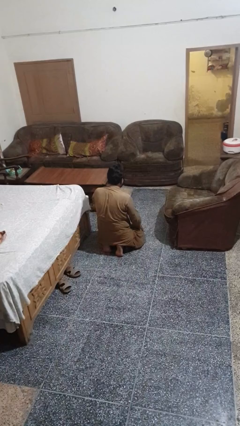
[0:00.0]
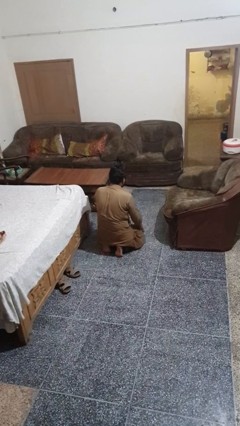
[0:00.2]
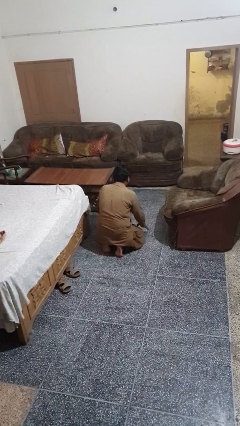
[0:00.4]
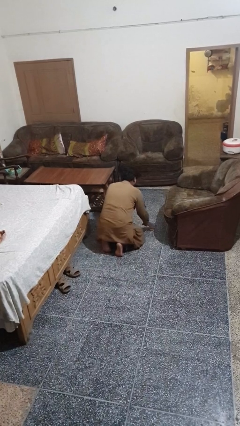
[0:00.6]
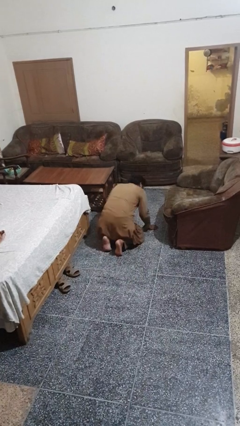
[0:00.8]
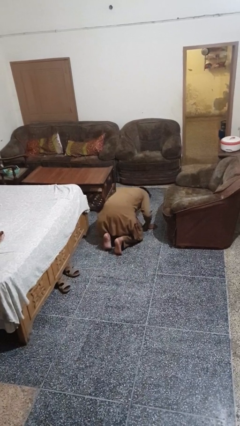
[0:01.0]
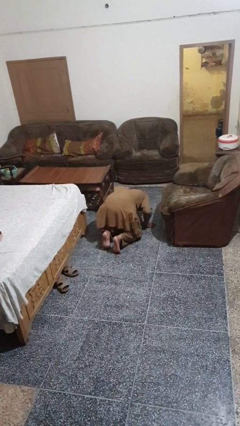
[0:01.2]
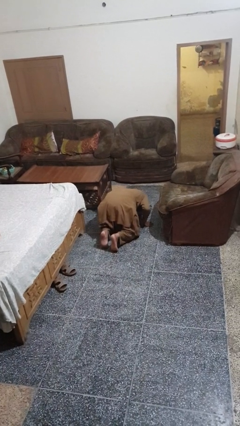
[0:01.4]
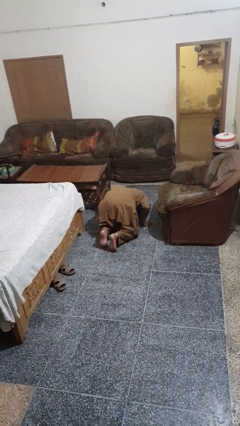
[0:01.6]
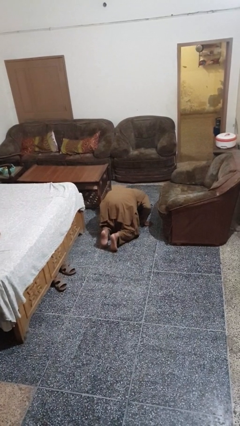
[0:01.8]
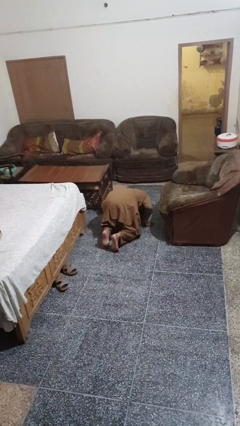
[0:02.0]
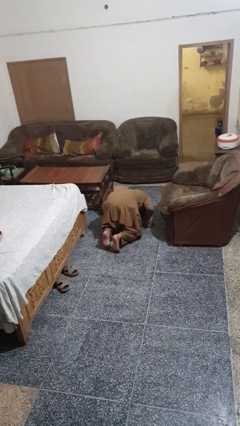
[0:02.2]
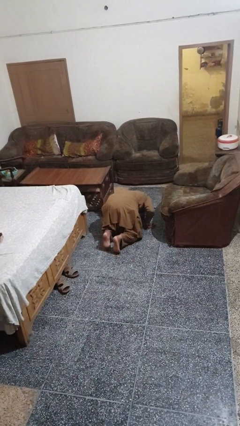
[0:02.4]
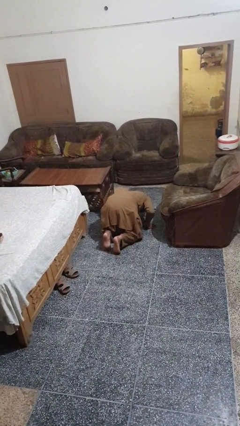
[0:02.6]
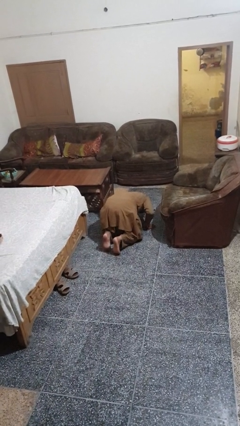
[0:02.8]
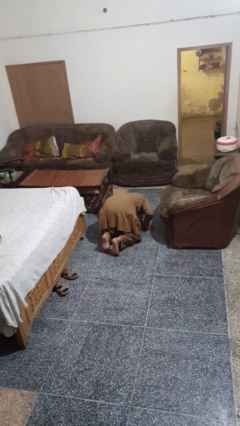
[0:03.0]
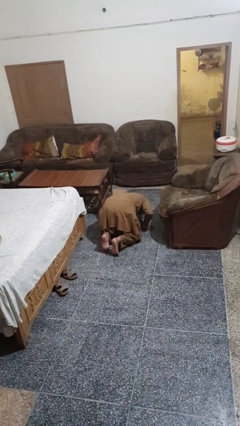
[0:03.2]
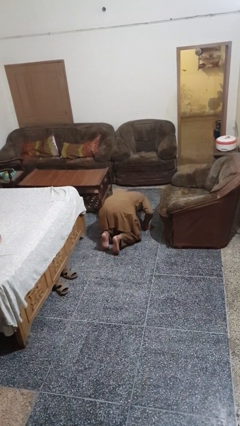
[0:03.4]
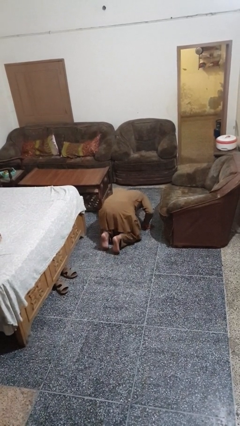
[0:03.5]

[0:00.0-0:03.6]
person searches under couch

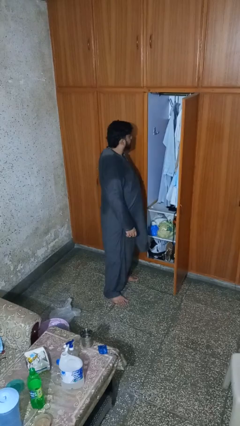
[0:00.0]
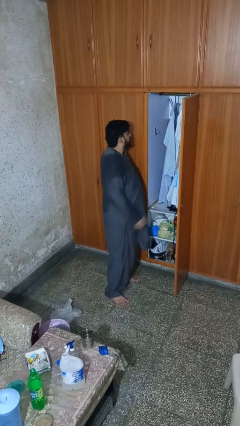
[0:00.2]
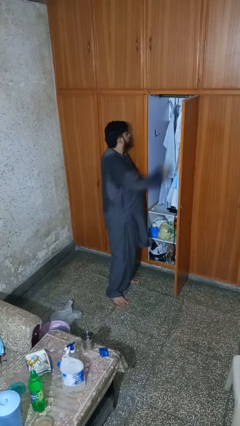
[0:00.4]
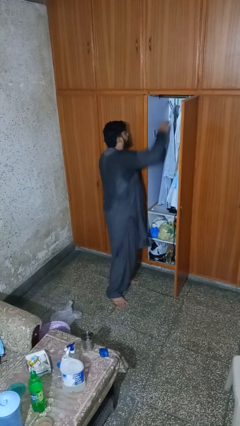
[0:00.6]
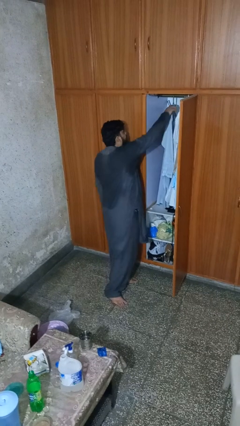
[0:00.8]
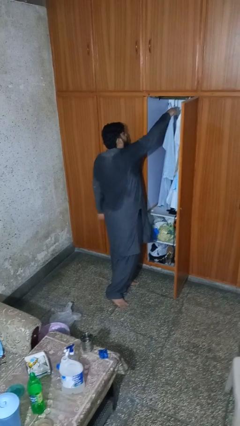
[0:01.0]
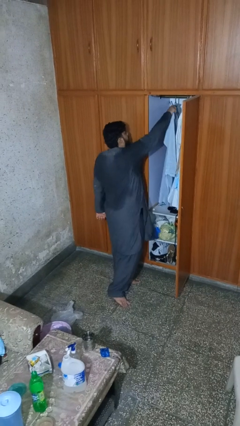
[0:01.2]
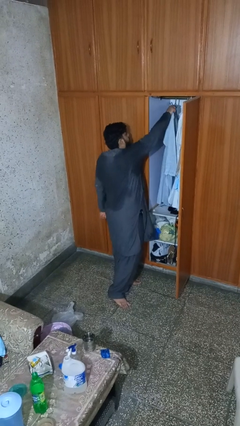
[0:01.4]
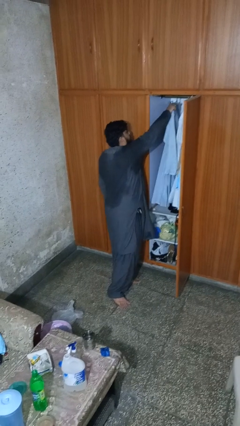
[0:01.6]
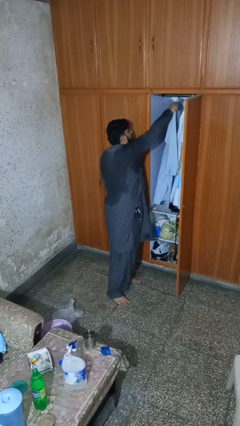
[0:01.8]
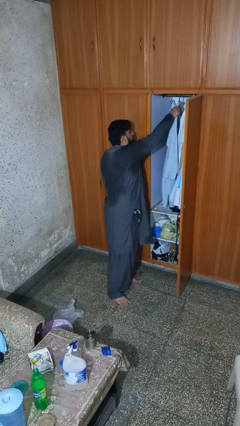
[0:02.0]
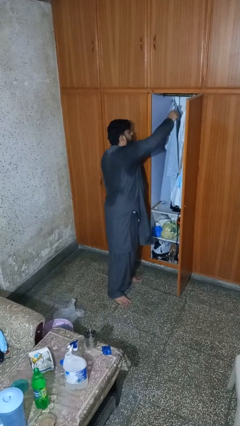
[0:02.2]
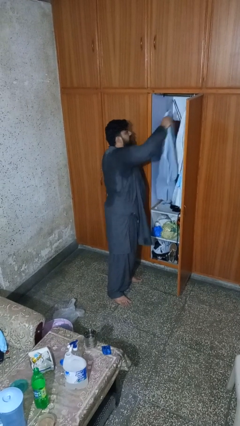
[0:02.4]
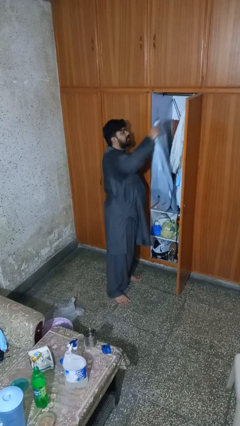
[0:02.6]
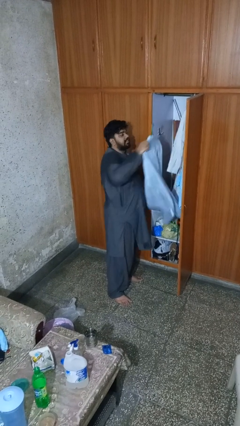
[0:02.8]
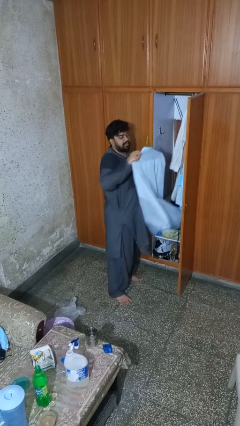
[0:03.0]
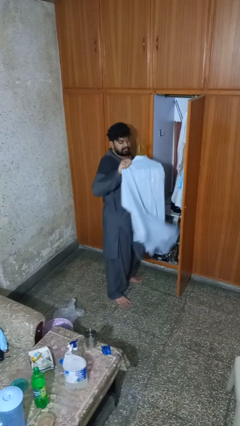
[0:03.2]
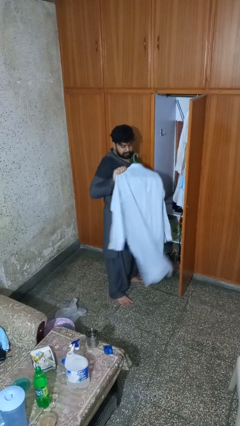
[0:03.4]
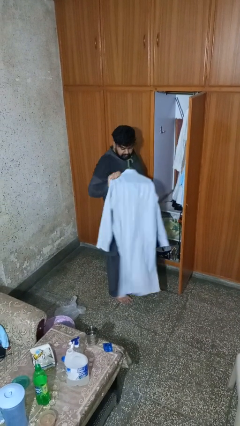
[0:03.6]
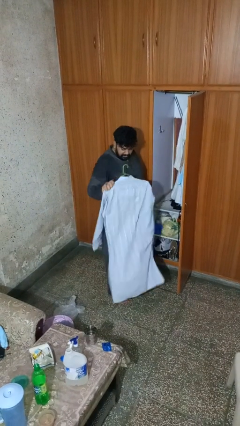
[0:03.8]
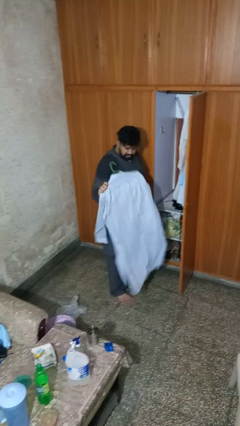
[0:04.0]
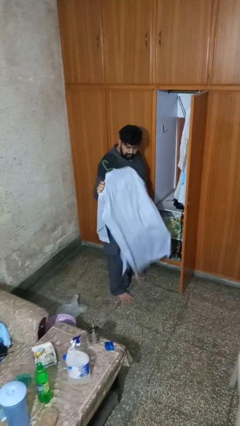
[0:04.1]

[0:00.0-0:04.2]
person takes clothes from closet

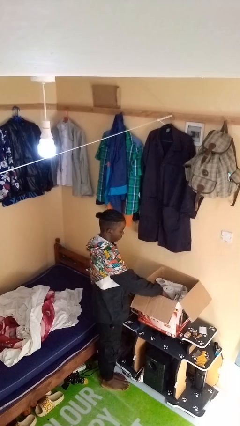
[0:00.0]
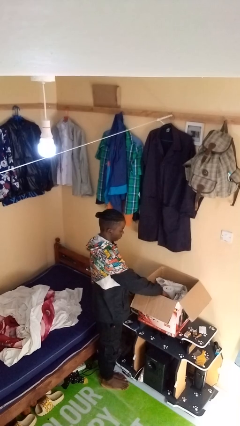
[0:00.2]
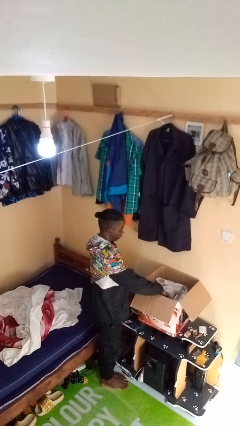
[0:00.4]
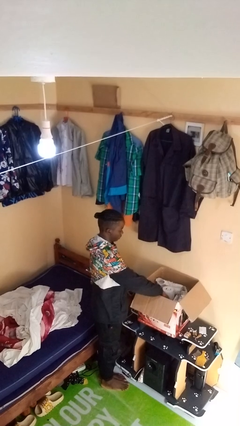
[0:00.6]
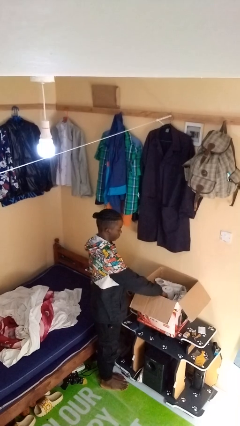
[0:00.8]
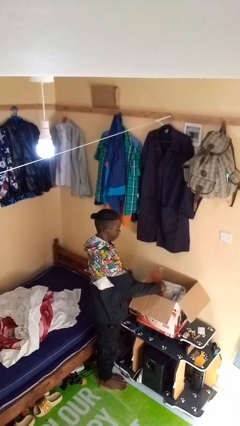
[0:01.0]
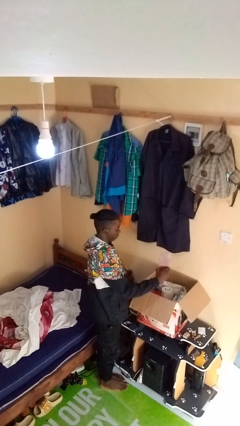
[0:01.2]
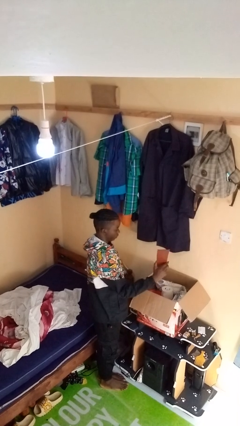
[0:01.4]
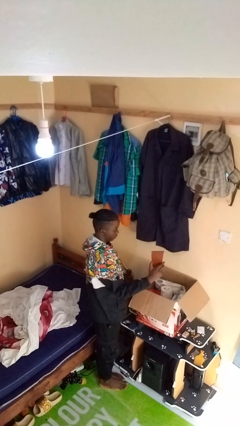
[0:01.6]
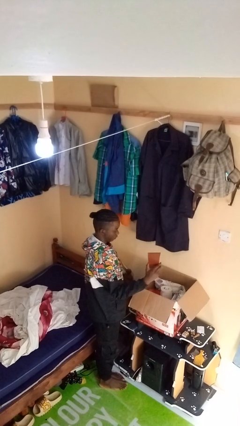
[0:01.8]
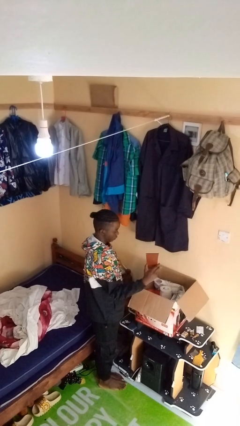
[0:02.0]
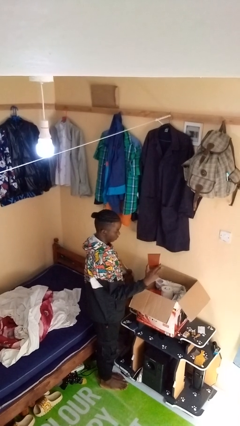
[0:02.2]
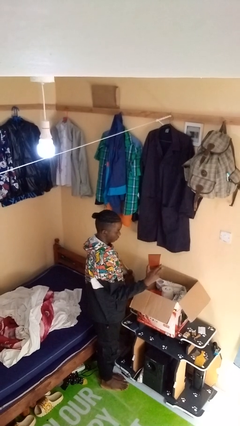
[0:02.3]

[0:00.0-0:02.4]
person takes object from box

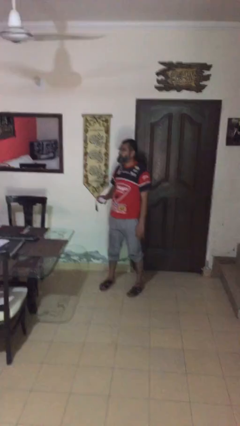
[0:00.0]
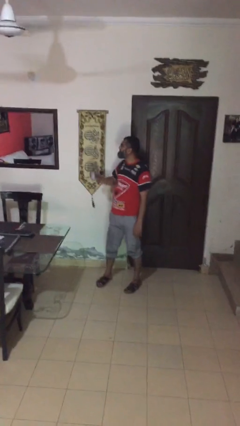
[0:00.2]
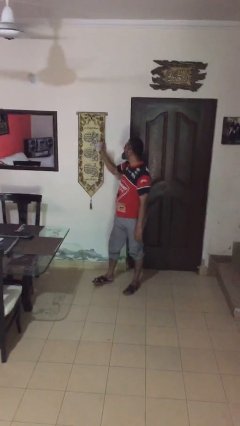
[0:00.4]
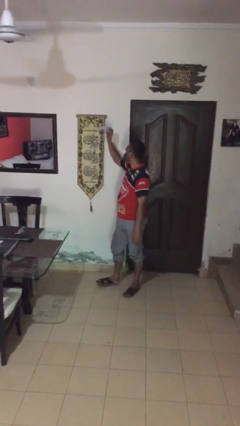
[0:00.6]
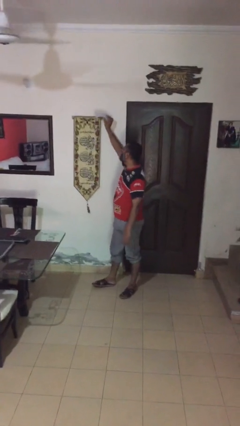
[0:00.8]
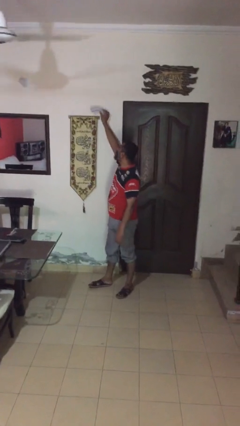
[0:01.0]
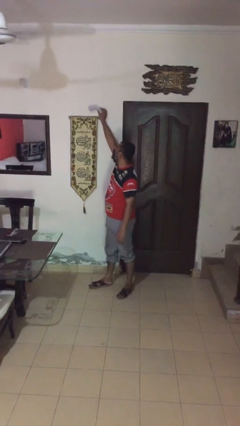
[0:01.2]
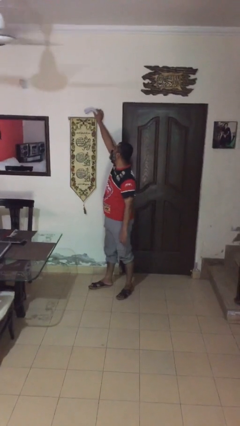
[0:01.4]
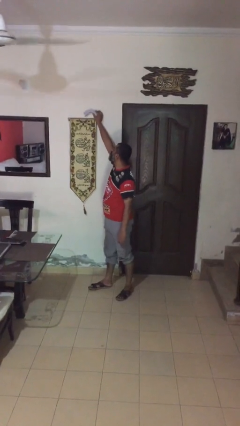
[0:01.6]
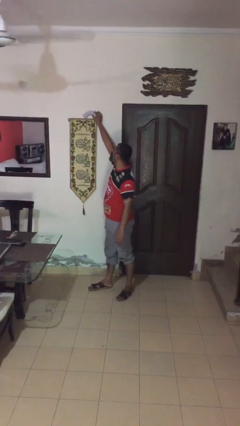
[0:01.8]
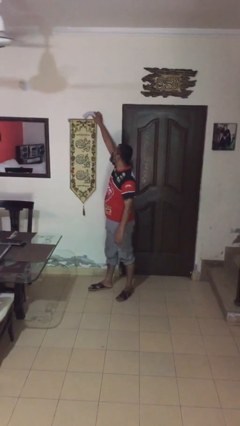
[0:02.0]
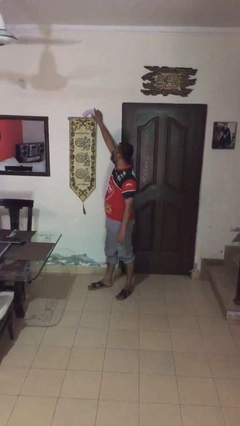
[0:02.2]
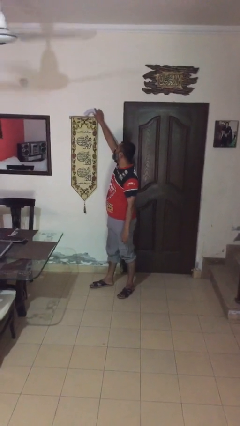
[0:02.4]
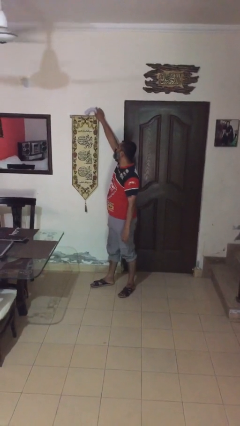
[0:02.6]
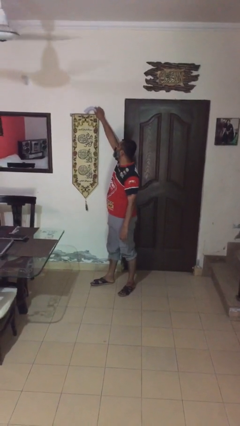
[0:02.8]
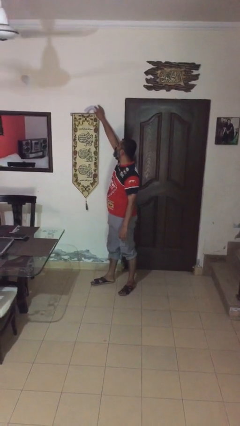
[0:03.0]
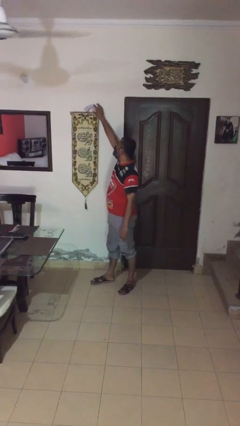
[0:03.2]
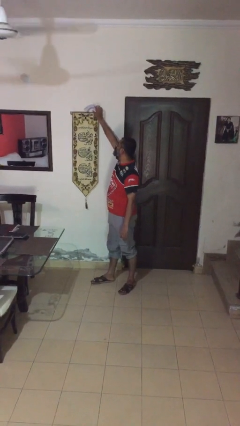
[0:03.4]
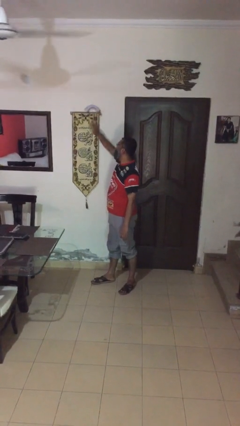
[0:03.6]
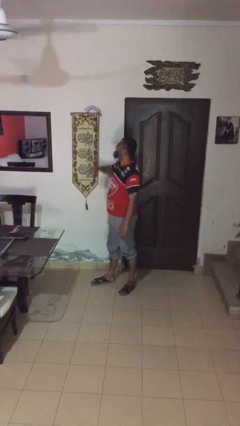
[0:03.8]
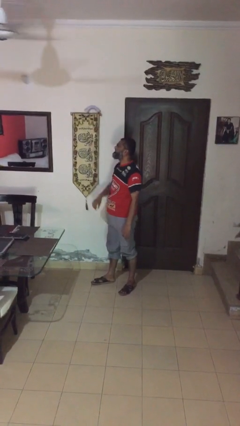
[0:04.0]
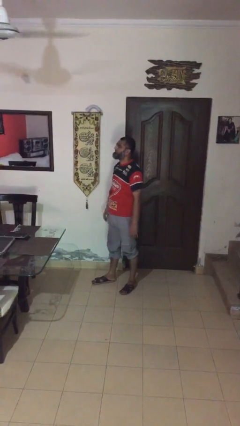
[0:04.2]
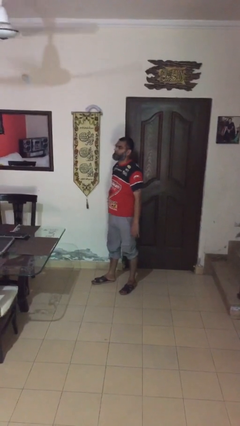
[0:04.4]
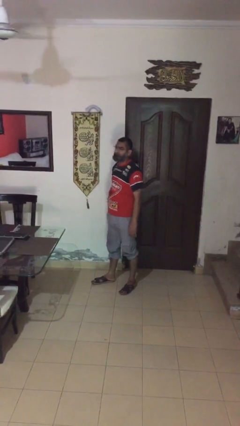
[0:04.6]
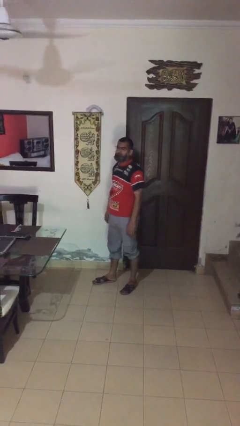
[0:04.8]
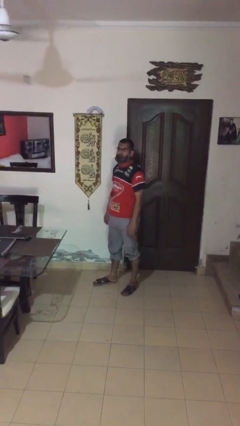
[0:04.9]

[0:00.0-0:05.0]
person puts down object on shelf

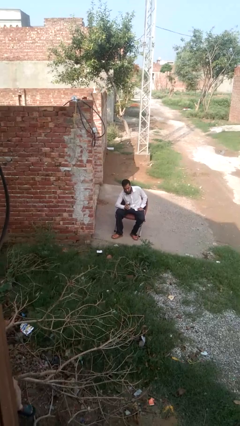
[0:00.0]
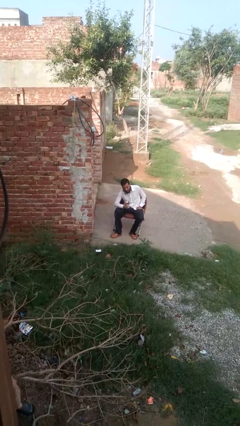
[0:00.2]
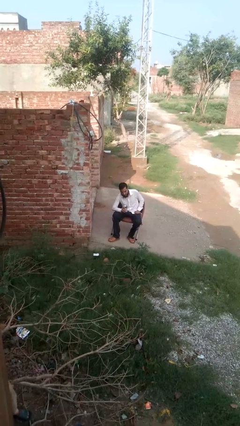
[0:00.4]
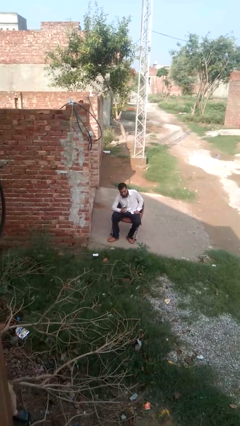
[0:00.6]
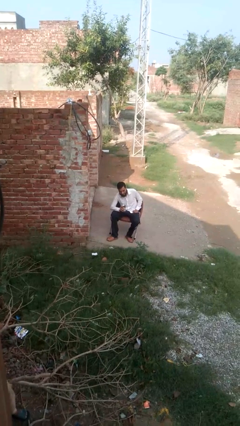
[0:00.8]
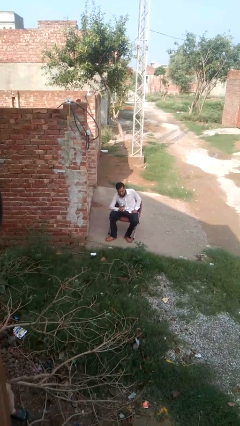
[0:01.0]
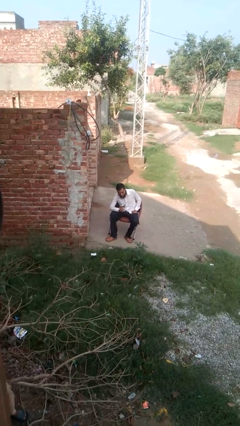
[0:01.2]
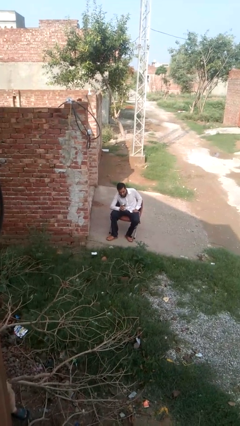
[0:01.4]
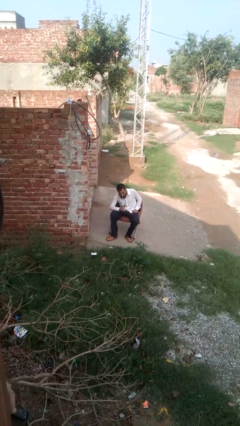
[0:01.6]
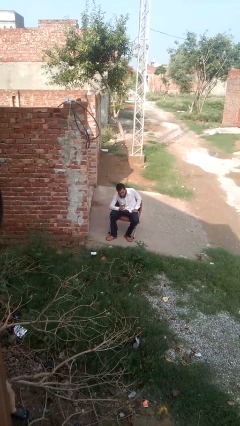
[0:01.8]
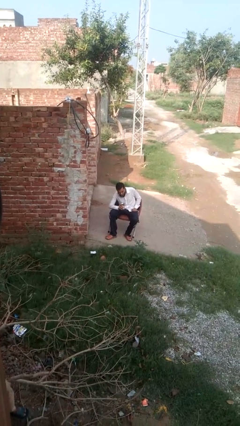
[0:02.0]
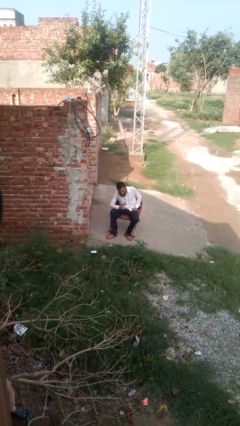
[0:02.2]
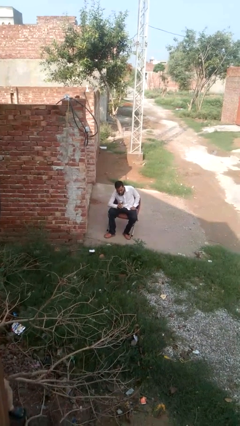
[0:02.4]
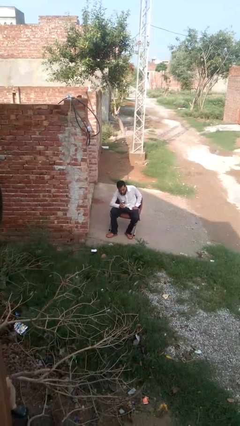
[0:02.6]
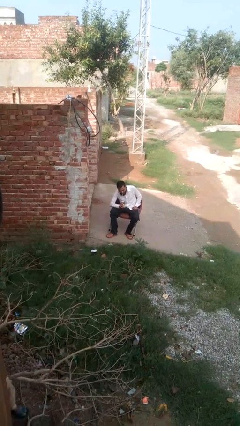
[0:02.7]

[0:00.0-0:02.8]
person drinks from straw
